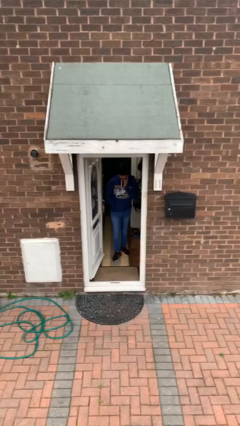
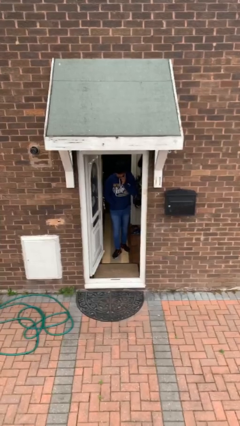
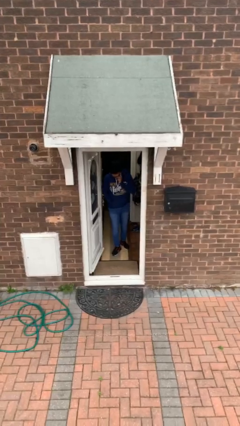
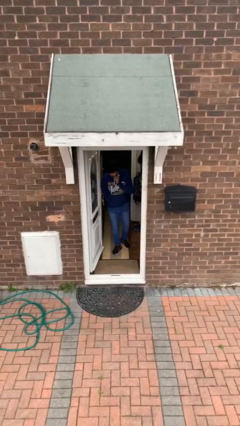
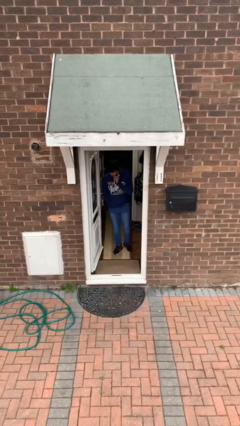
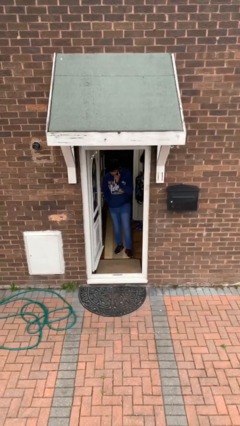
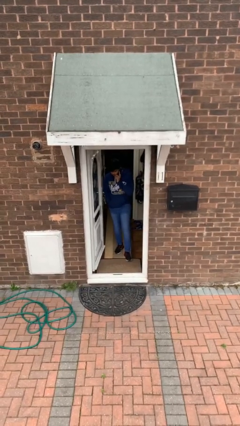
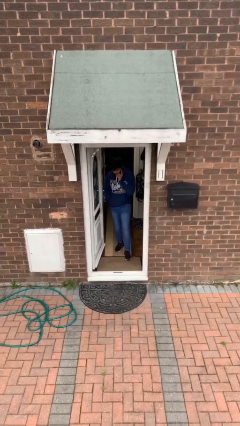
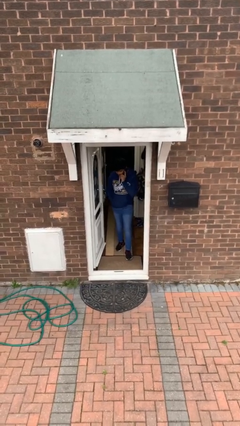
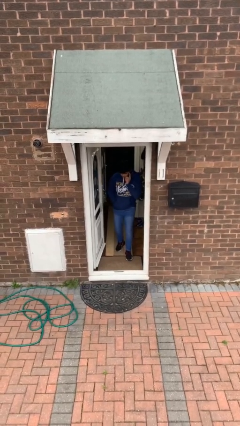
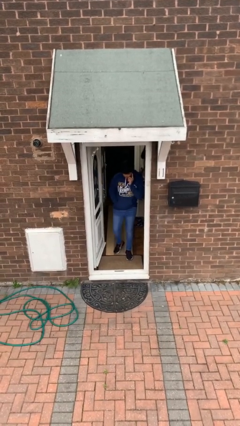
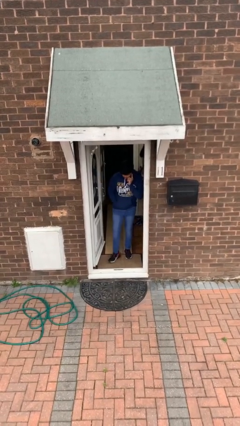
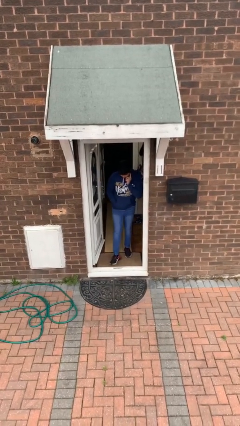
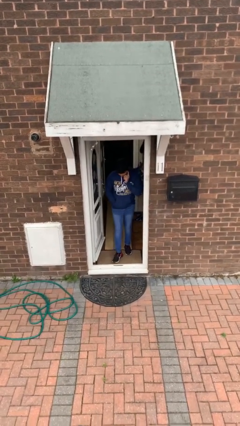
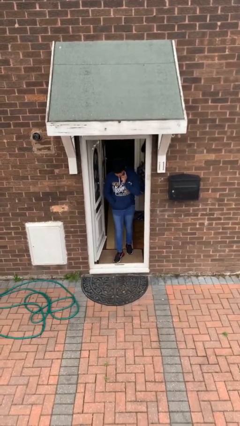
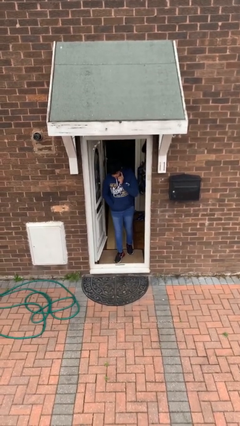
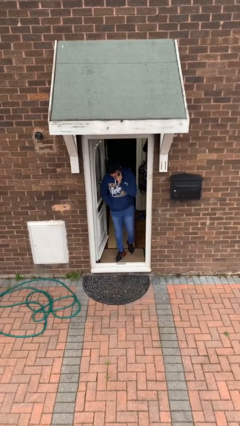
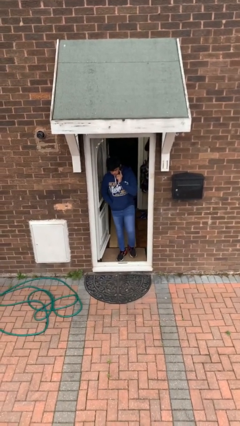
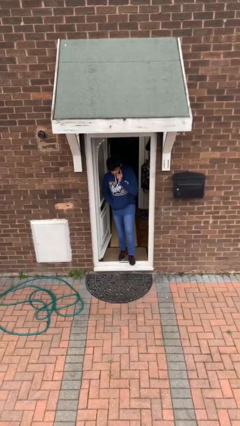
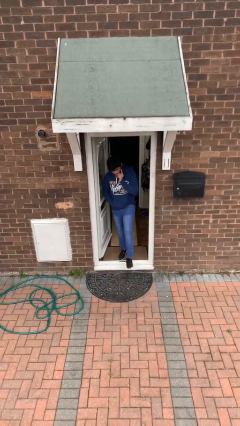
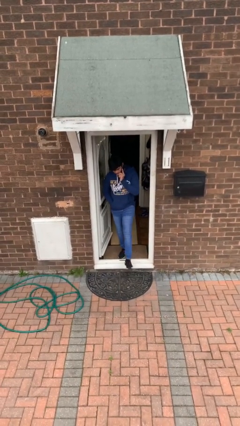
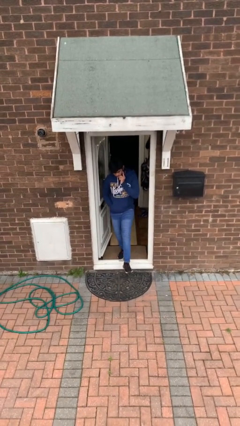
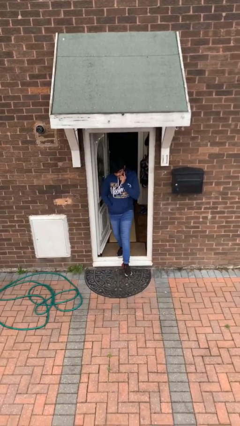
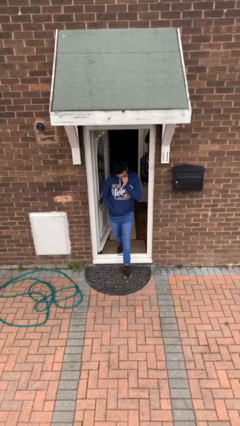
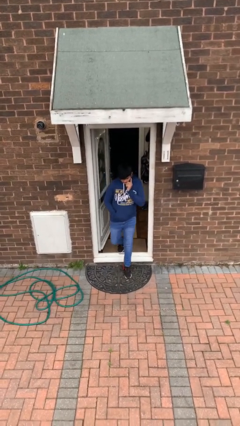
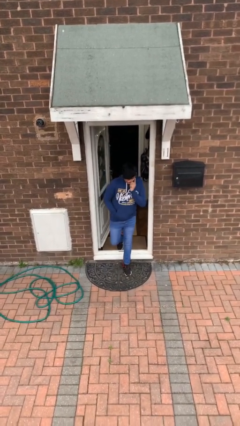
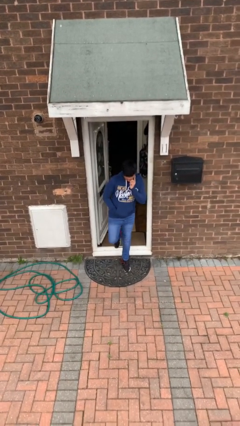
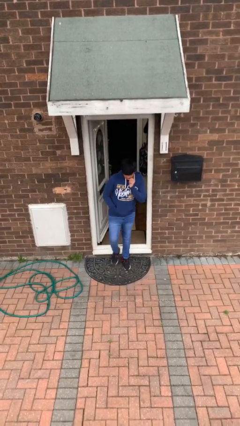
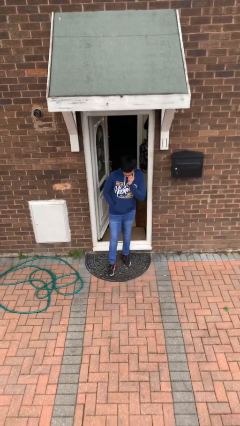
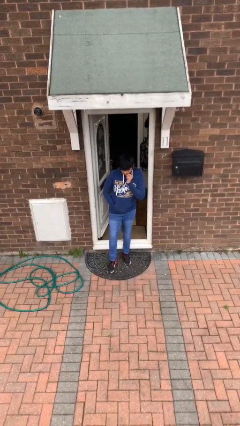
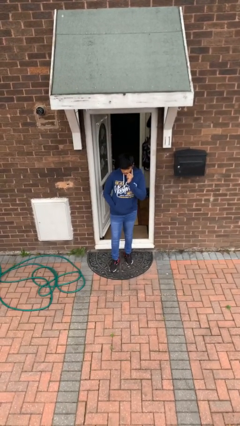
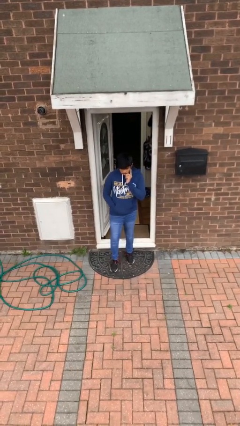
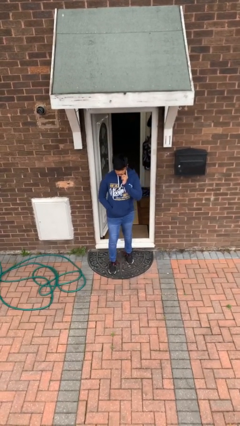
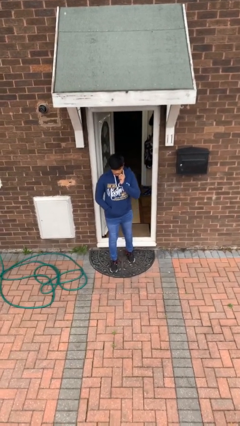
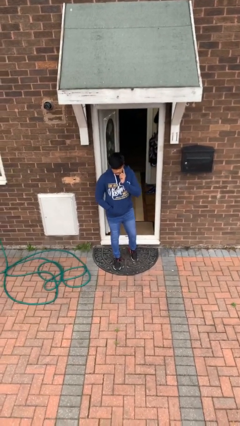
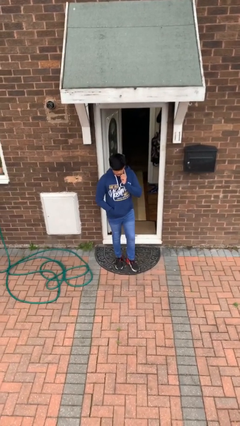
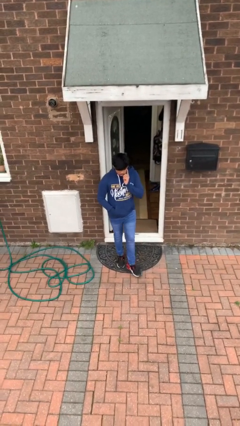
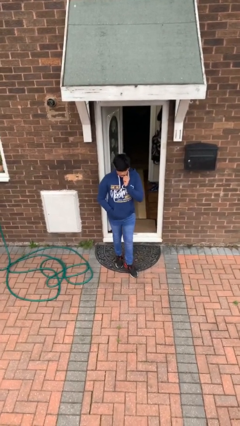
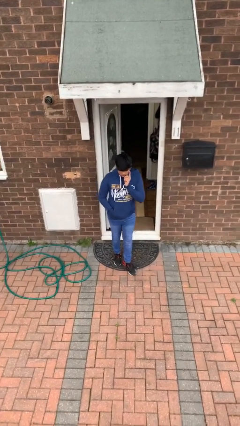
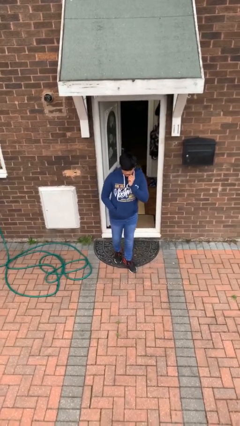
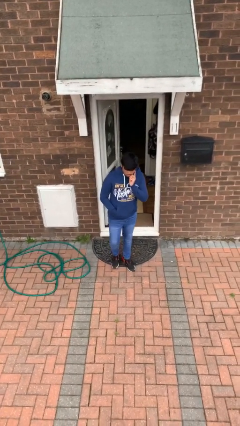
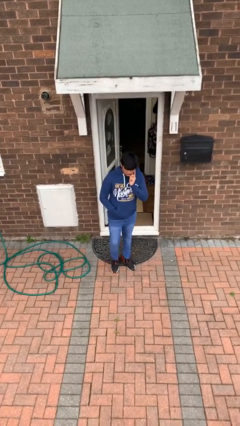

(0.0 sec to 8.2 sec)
person enters scene through structure

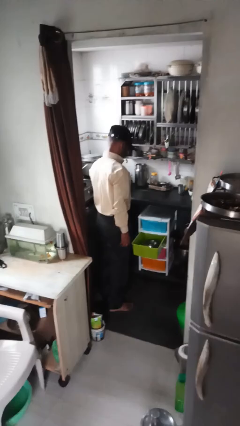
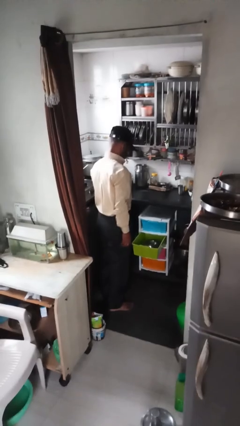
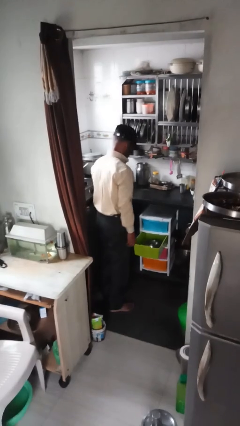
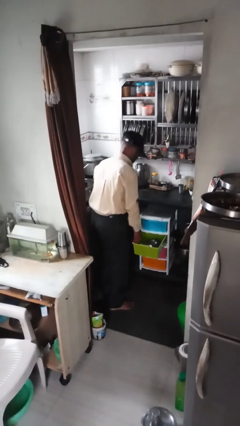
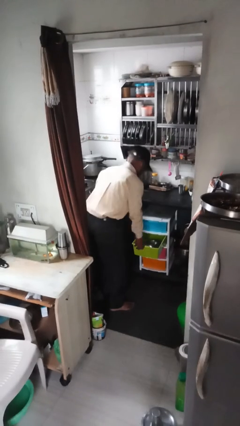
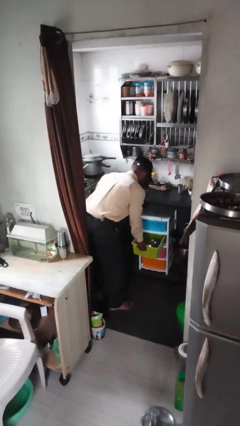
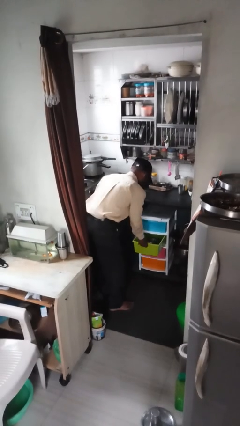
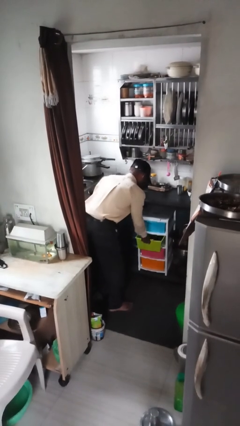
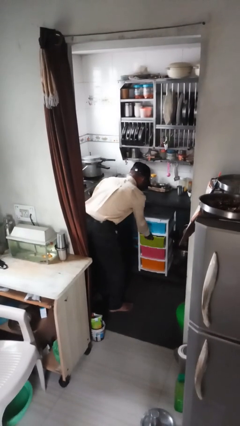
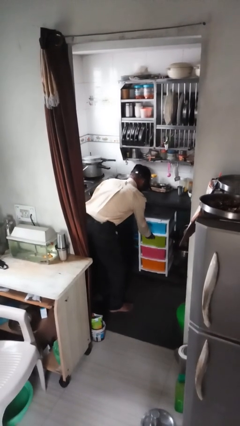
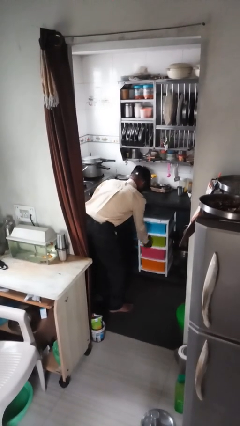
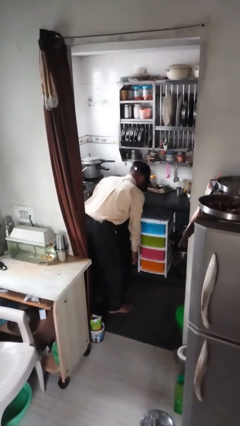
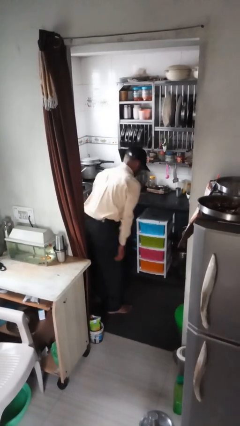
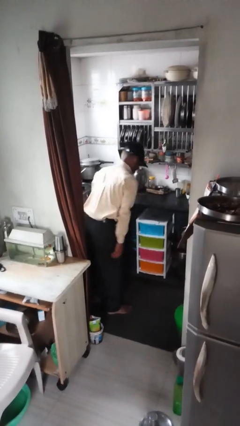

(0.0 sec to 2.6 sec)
person closes kitchen drawer

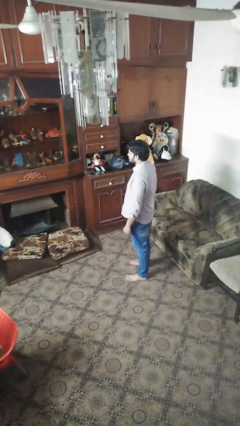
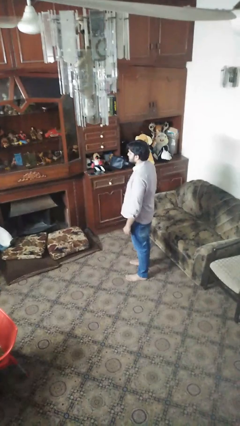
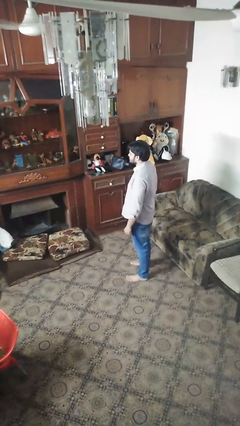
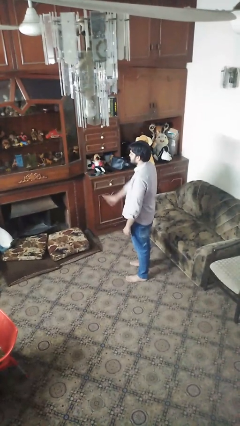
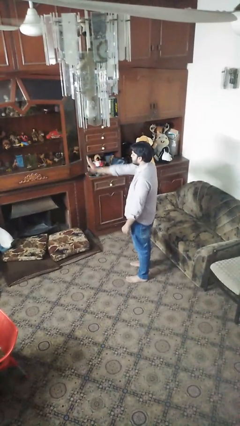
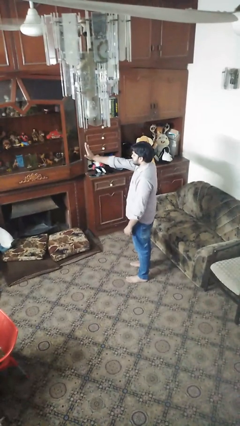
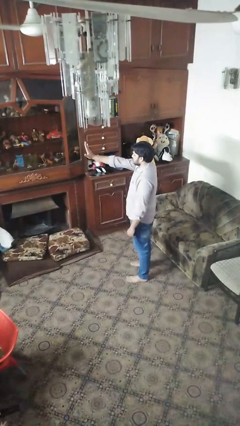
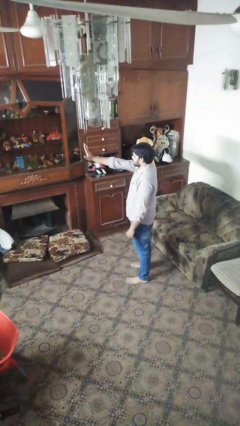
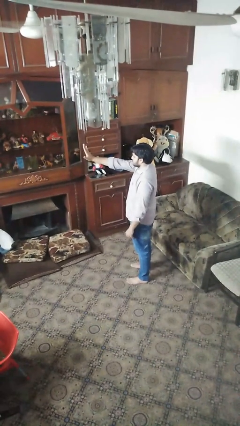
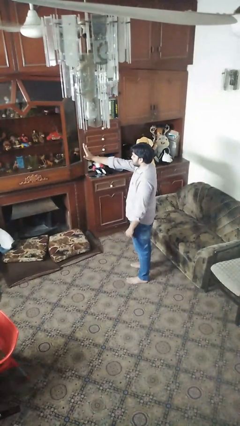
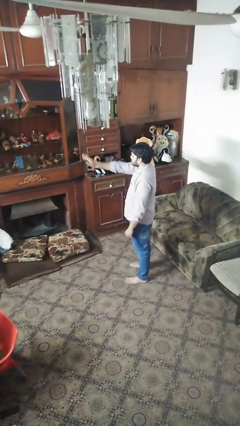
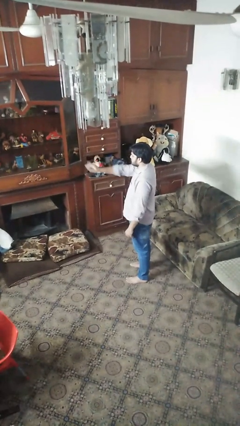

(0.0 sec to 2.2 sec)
person gestures stop

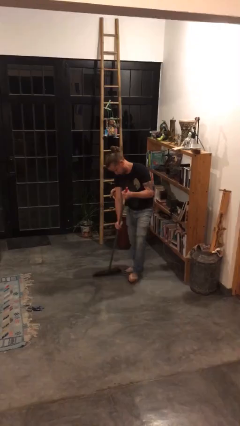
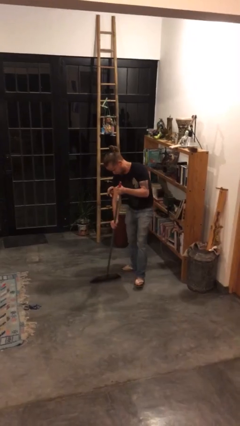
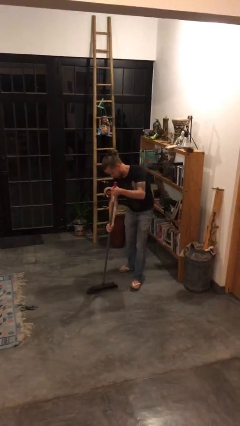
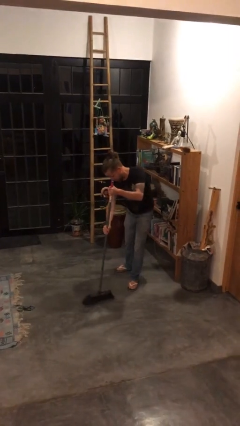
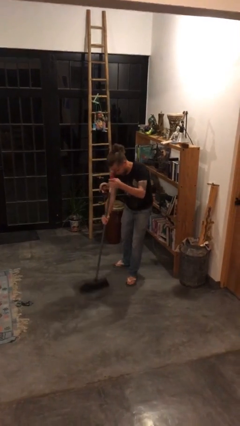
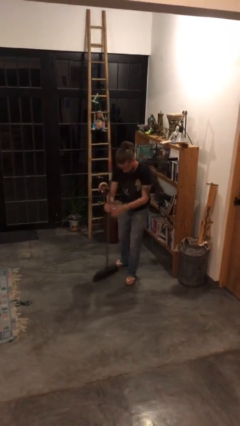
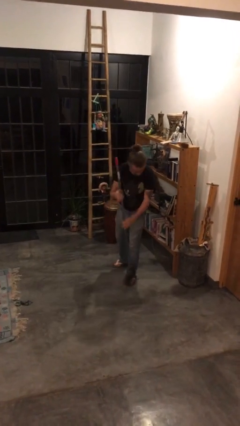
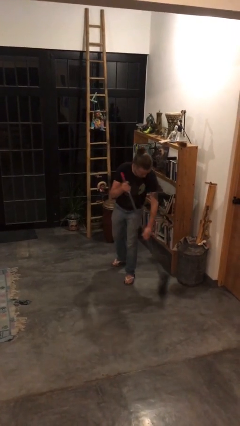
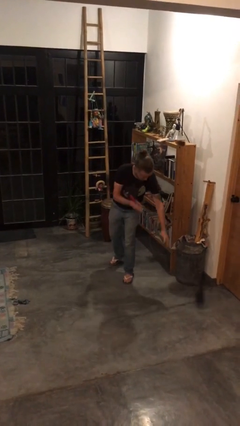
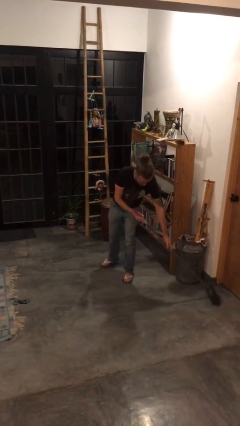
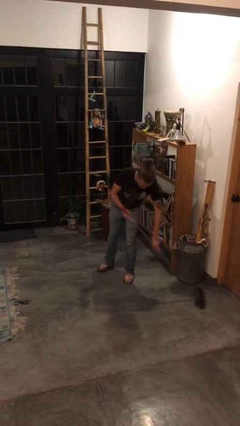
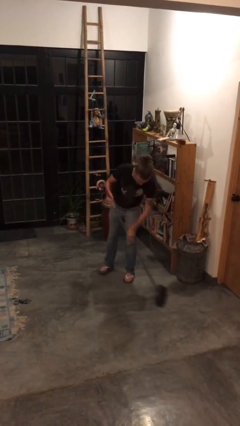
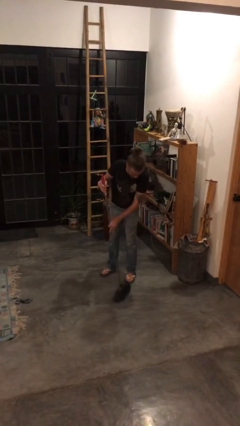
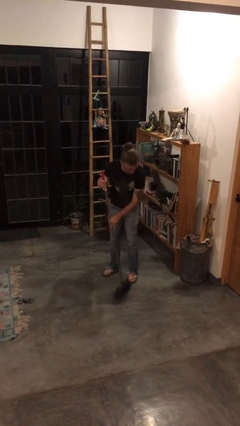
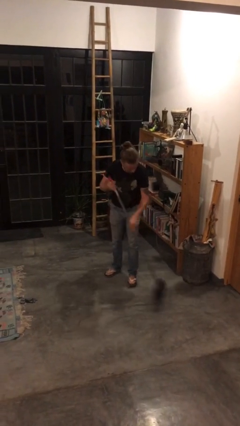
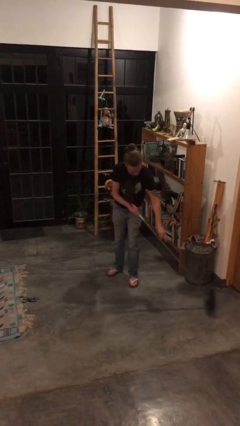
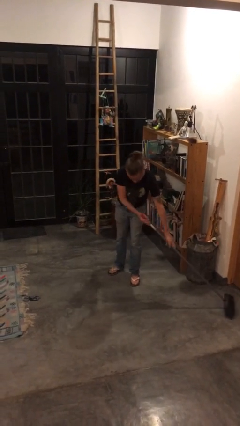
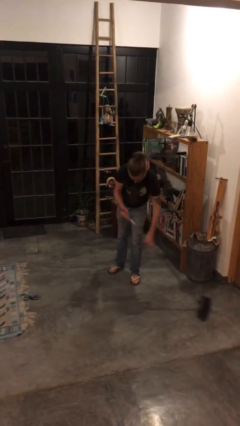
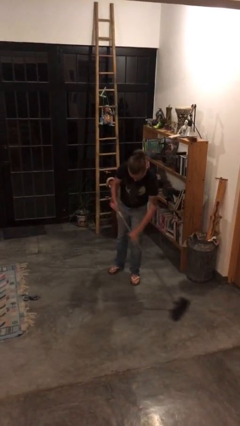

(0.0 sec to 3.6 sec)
person sweeps floor

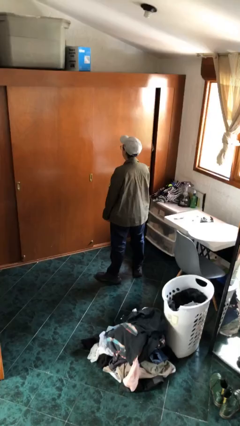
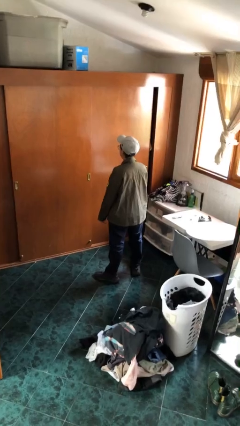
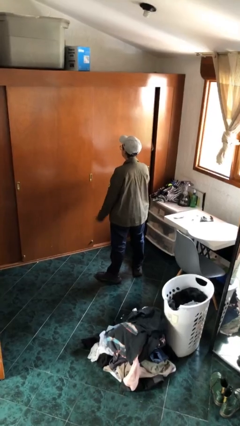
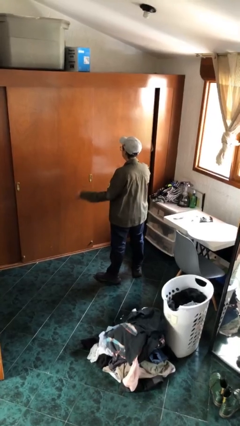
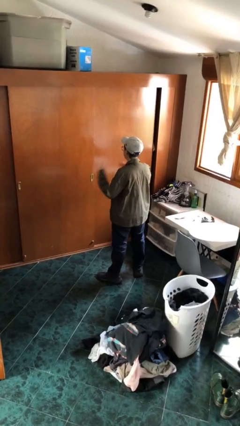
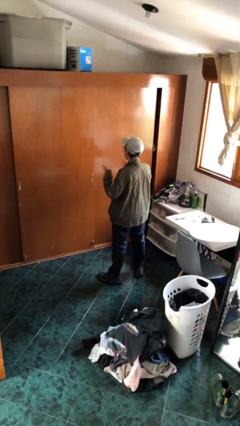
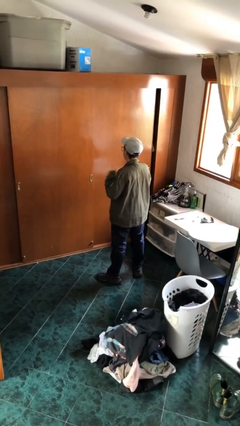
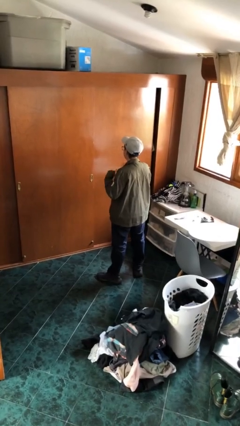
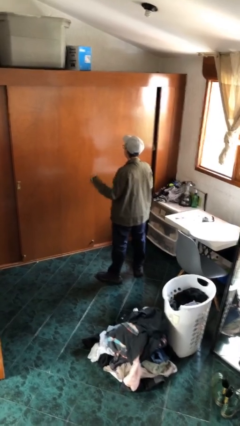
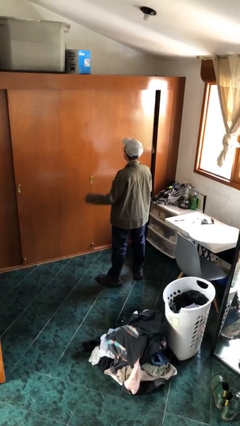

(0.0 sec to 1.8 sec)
person drums on chest
